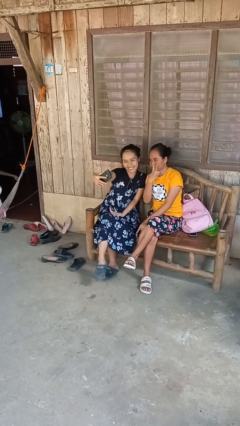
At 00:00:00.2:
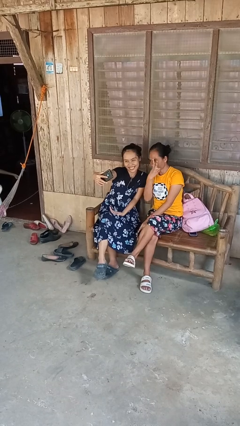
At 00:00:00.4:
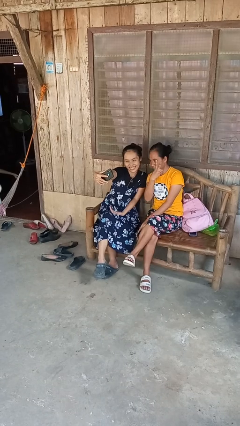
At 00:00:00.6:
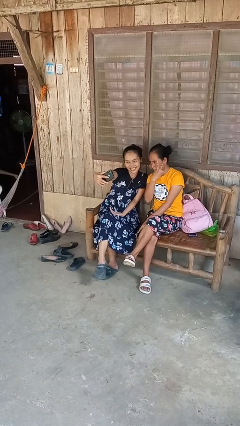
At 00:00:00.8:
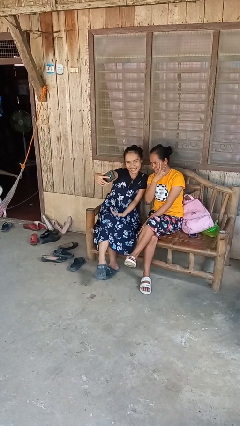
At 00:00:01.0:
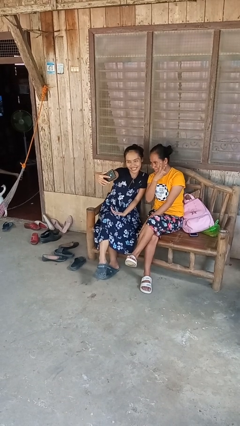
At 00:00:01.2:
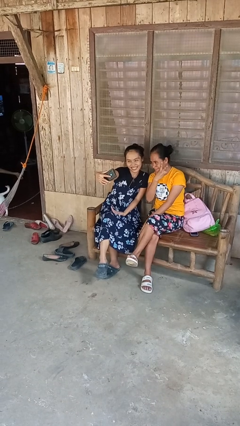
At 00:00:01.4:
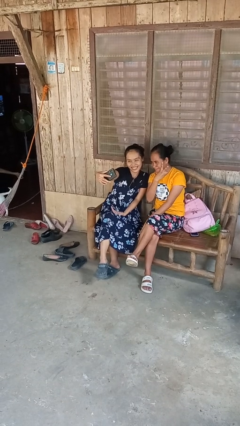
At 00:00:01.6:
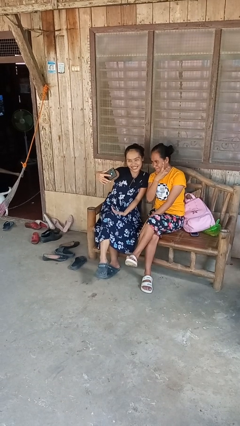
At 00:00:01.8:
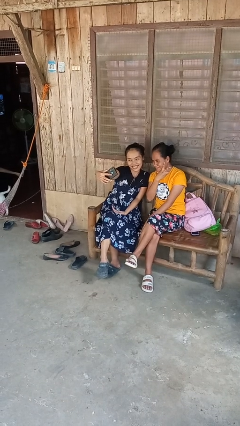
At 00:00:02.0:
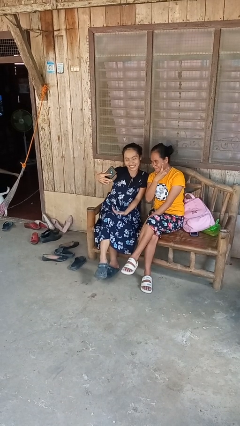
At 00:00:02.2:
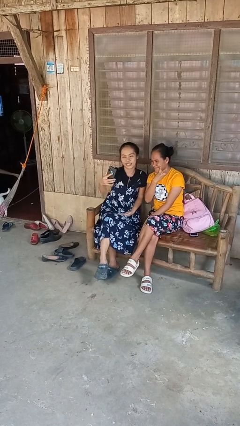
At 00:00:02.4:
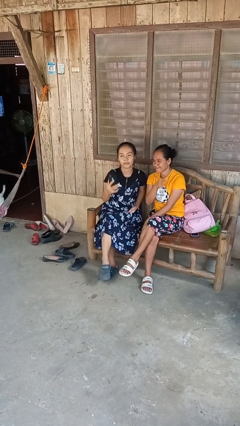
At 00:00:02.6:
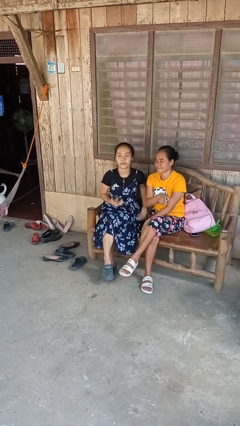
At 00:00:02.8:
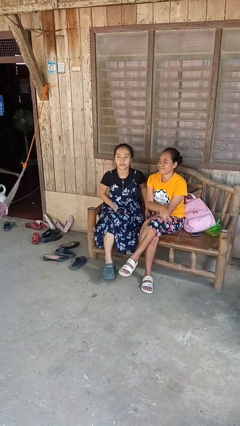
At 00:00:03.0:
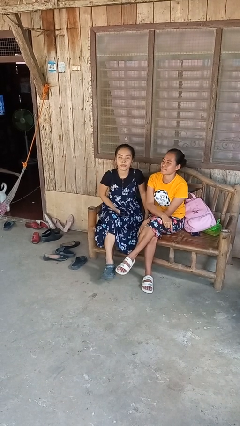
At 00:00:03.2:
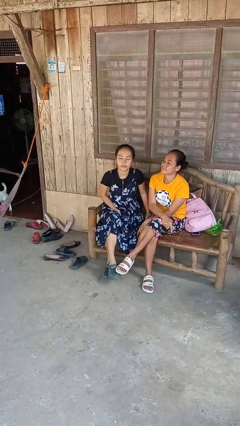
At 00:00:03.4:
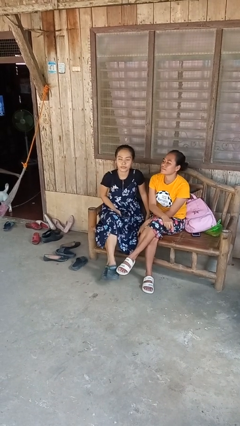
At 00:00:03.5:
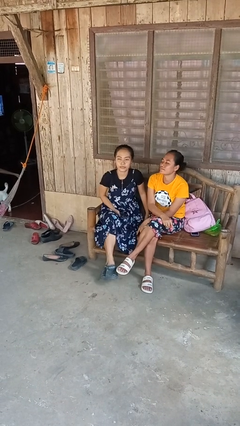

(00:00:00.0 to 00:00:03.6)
person takes selfie with person

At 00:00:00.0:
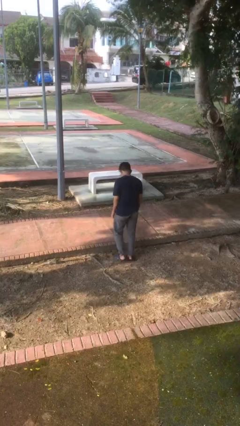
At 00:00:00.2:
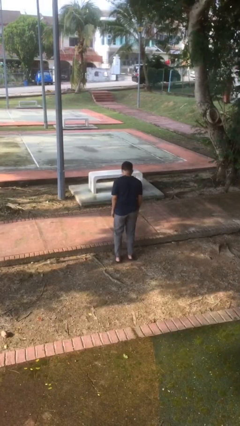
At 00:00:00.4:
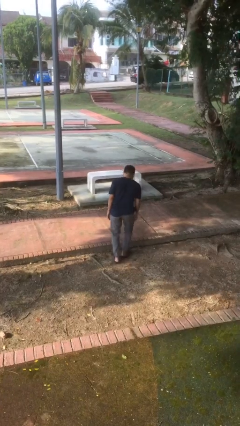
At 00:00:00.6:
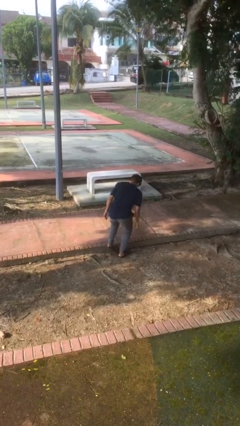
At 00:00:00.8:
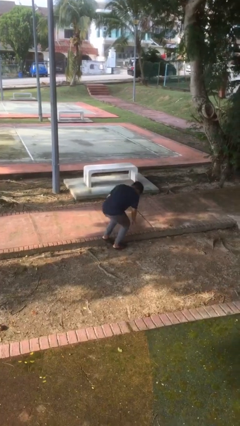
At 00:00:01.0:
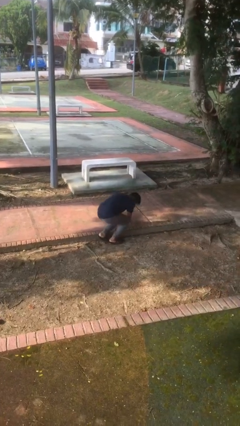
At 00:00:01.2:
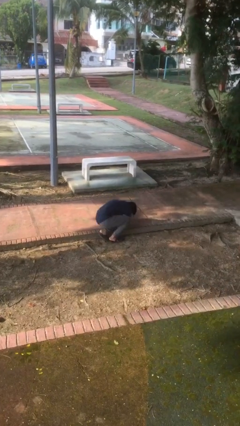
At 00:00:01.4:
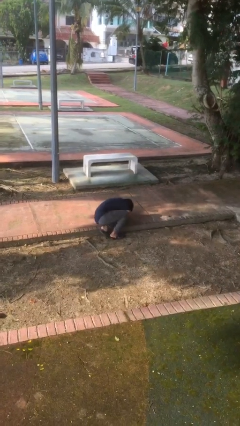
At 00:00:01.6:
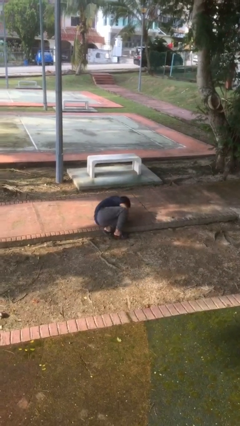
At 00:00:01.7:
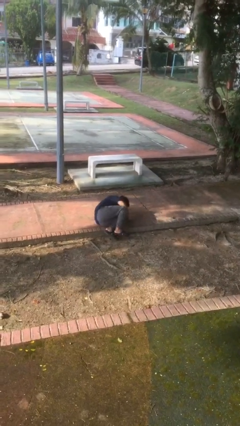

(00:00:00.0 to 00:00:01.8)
person trips on object on floor

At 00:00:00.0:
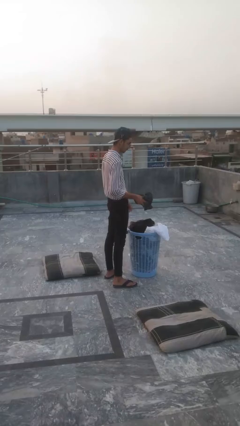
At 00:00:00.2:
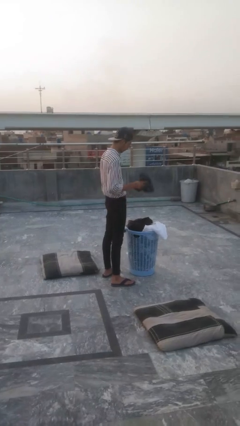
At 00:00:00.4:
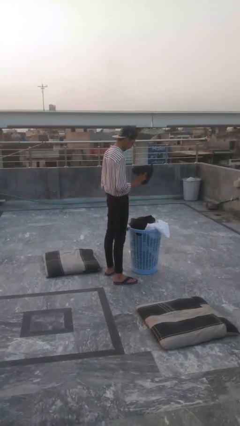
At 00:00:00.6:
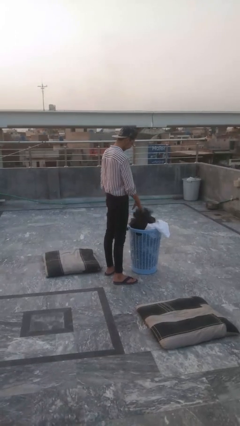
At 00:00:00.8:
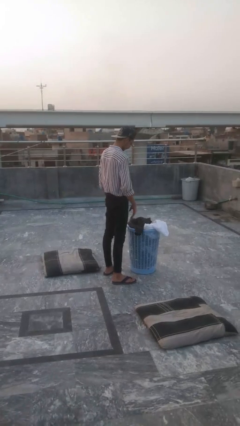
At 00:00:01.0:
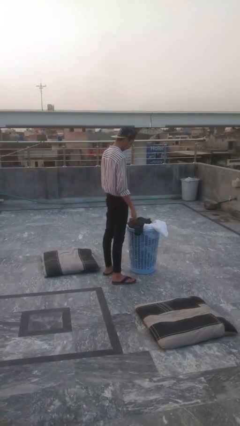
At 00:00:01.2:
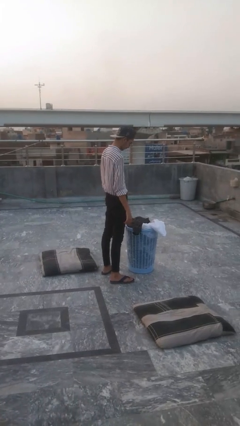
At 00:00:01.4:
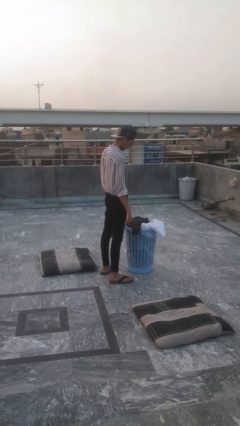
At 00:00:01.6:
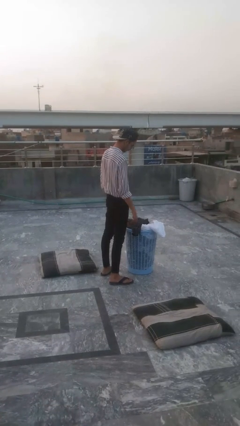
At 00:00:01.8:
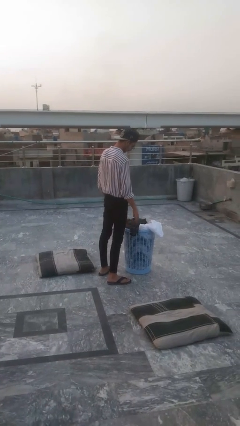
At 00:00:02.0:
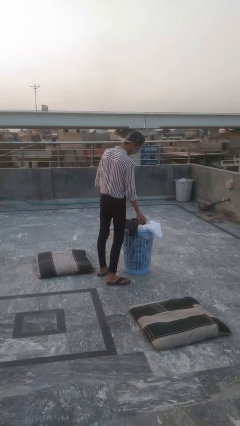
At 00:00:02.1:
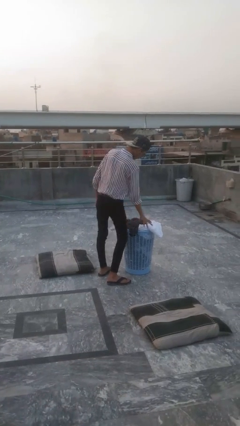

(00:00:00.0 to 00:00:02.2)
person puts object into basket

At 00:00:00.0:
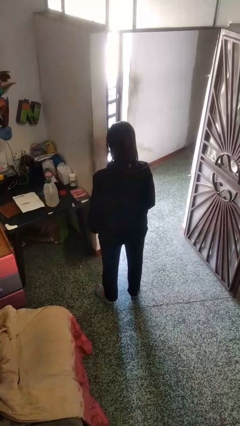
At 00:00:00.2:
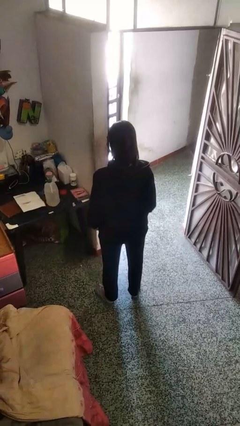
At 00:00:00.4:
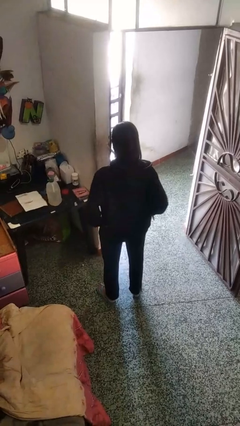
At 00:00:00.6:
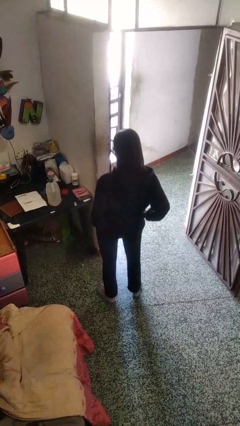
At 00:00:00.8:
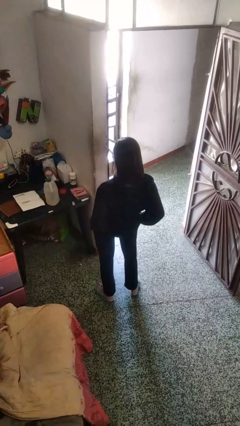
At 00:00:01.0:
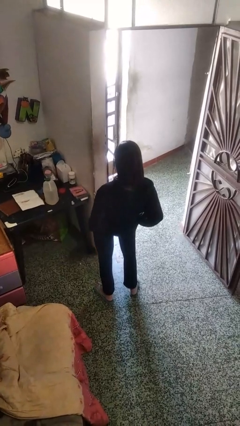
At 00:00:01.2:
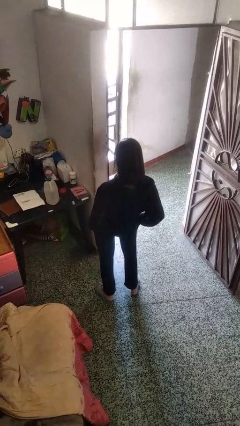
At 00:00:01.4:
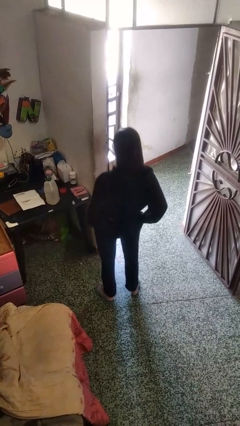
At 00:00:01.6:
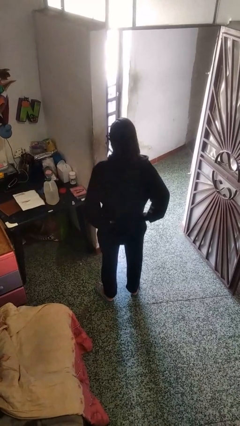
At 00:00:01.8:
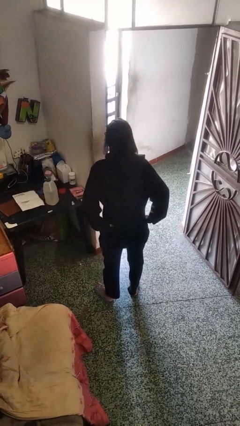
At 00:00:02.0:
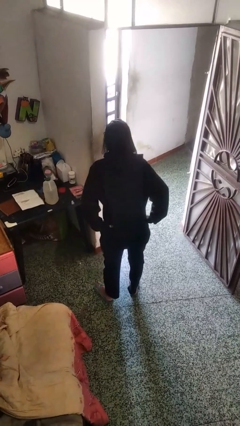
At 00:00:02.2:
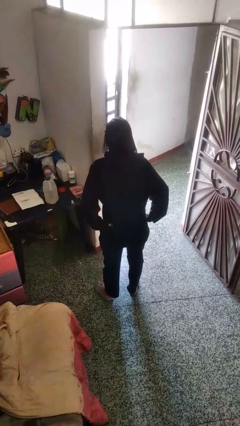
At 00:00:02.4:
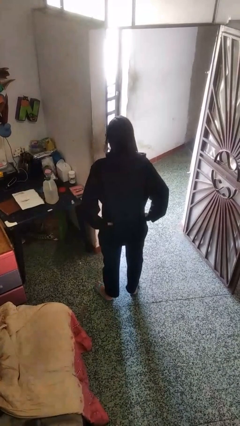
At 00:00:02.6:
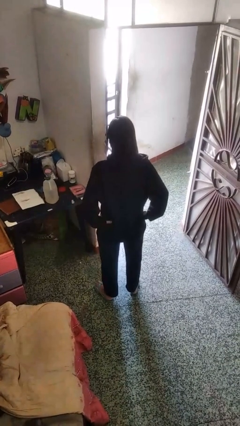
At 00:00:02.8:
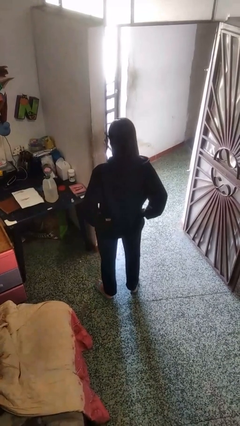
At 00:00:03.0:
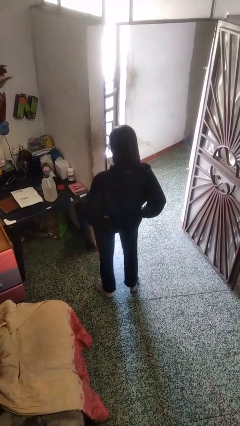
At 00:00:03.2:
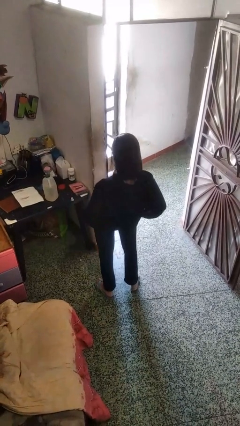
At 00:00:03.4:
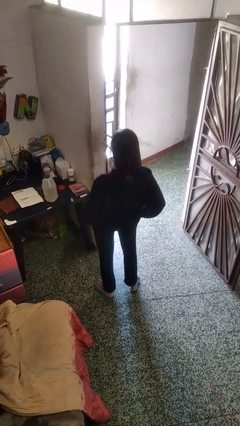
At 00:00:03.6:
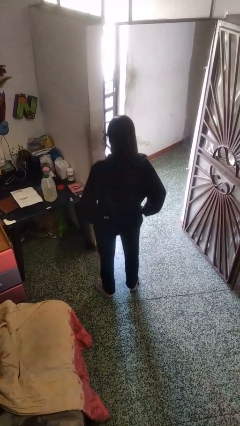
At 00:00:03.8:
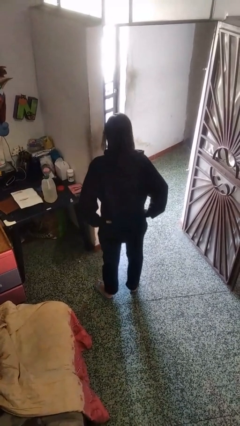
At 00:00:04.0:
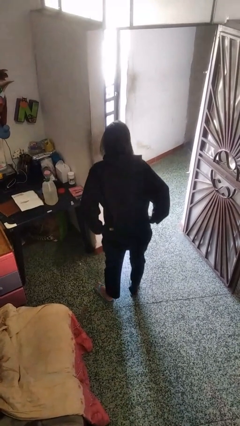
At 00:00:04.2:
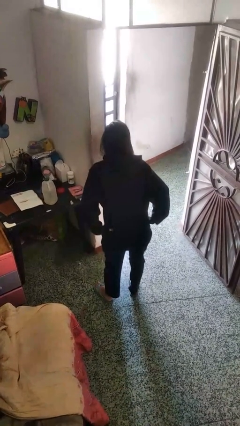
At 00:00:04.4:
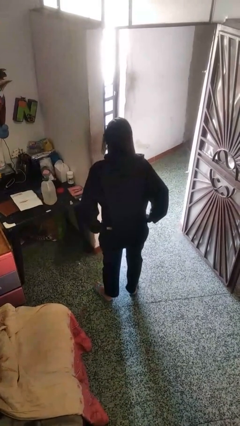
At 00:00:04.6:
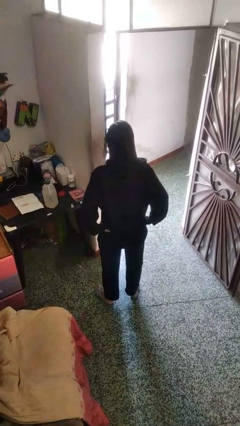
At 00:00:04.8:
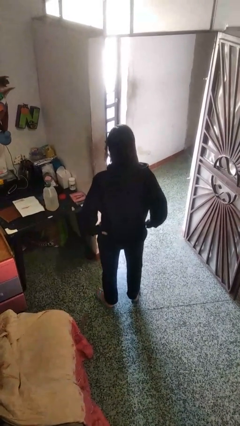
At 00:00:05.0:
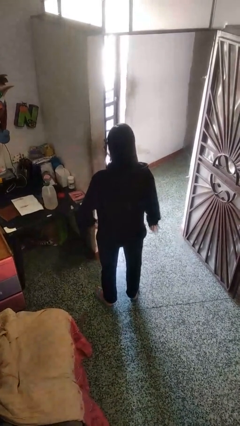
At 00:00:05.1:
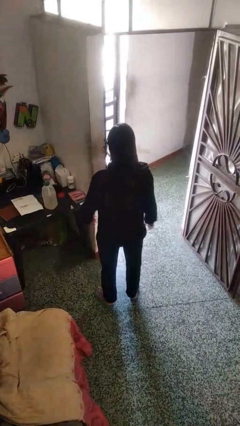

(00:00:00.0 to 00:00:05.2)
person wiggles hips

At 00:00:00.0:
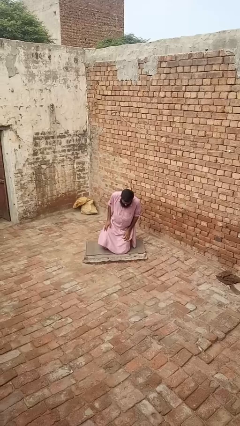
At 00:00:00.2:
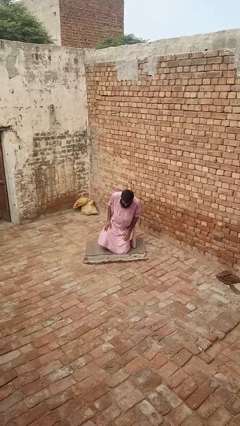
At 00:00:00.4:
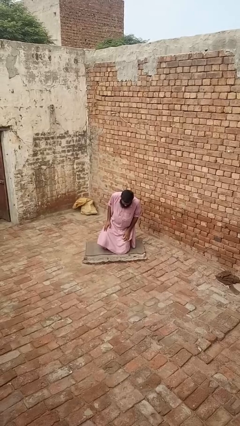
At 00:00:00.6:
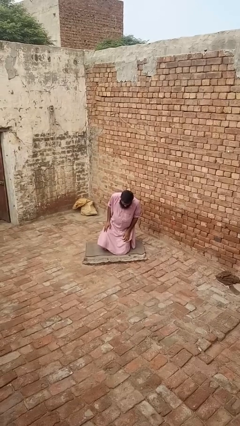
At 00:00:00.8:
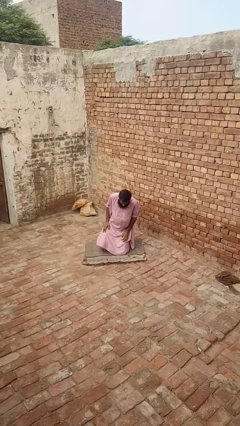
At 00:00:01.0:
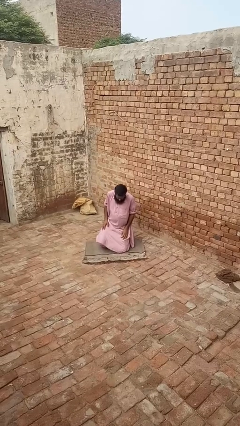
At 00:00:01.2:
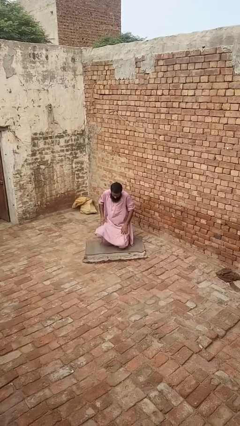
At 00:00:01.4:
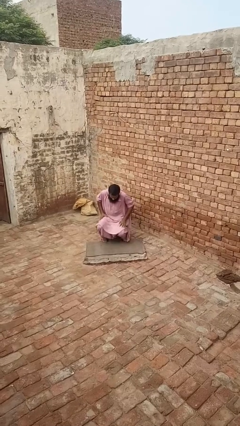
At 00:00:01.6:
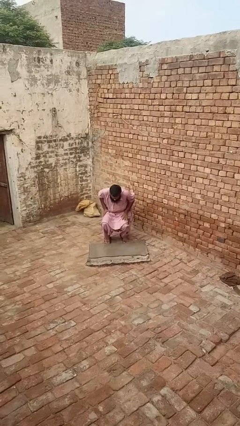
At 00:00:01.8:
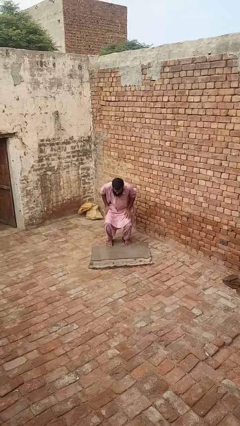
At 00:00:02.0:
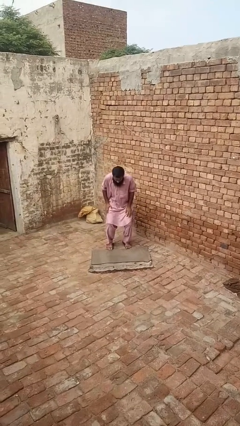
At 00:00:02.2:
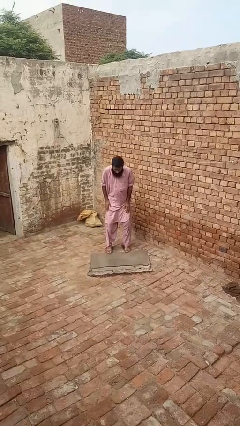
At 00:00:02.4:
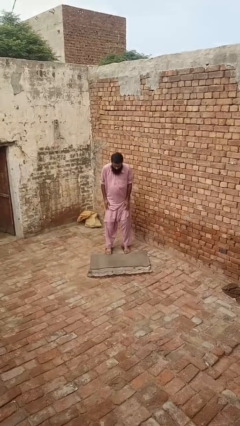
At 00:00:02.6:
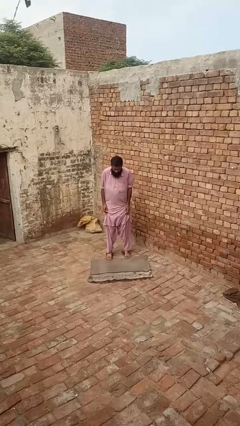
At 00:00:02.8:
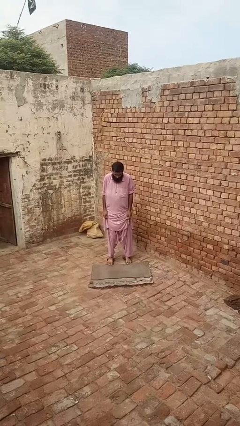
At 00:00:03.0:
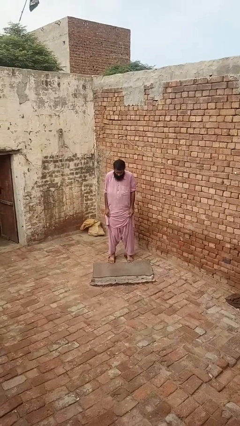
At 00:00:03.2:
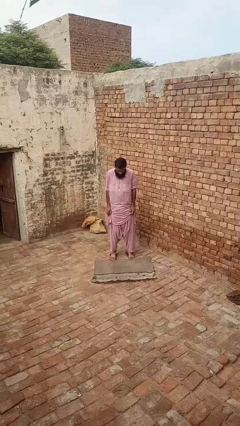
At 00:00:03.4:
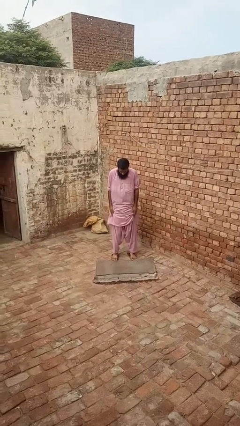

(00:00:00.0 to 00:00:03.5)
person stands up from floor

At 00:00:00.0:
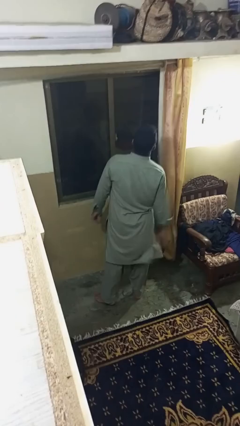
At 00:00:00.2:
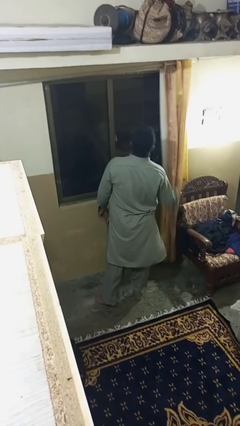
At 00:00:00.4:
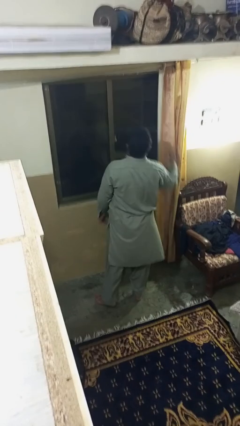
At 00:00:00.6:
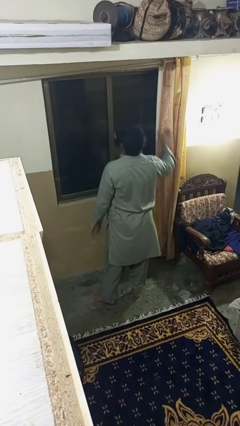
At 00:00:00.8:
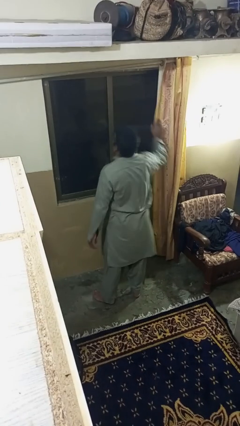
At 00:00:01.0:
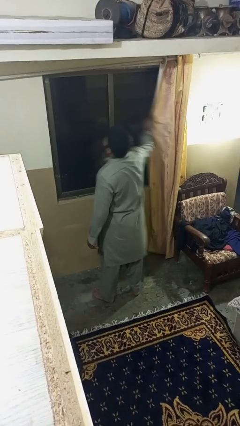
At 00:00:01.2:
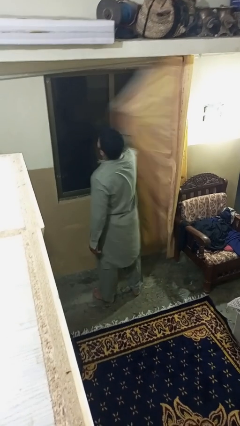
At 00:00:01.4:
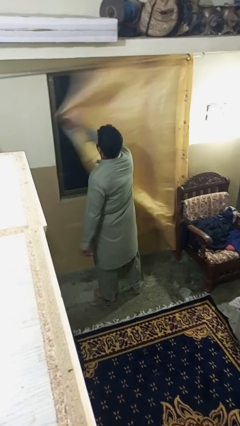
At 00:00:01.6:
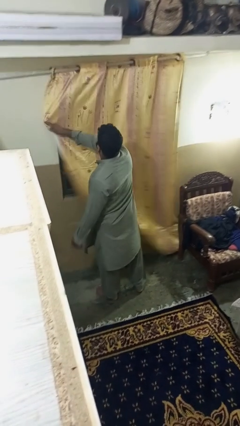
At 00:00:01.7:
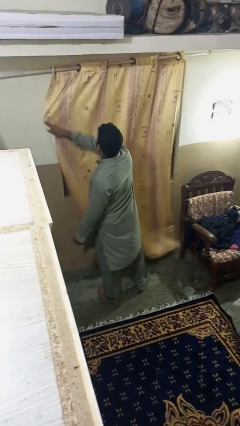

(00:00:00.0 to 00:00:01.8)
person closes curtains
